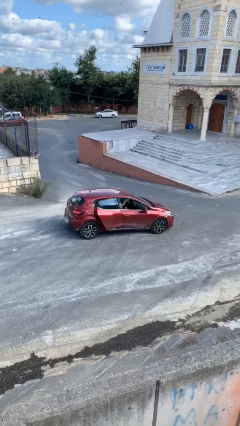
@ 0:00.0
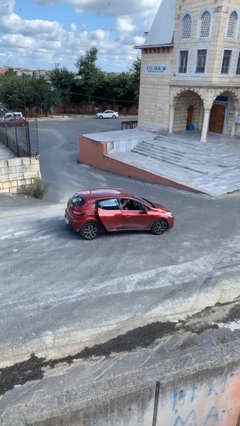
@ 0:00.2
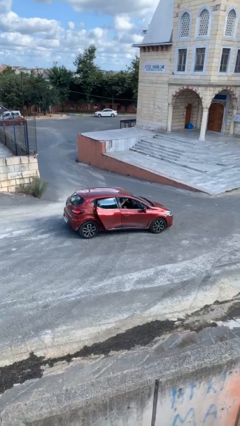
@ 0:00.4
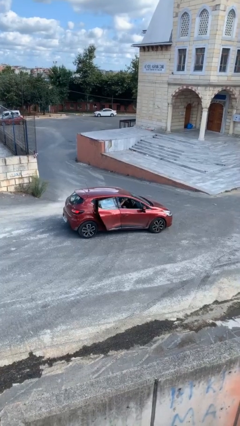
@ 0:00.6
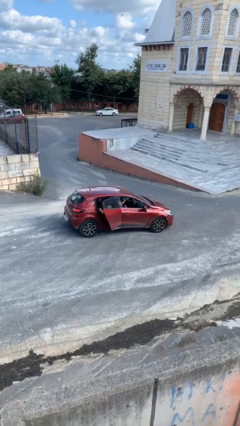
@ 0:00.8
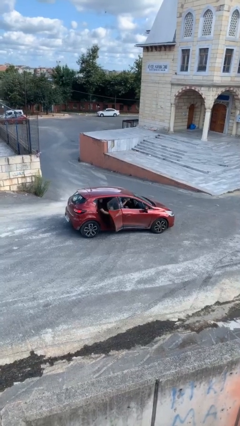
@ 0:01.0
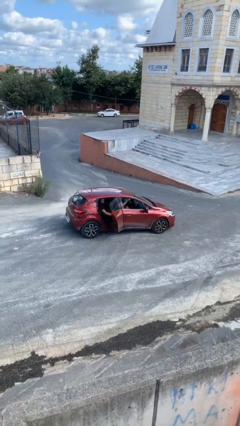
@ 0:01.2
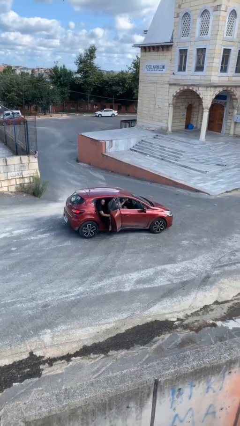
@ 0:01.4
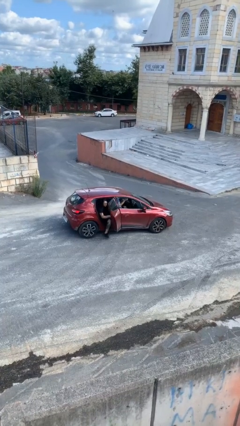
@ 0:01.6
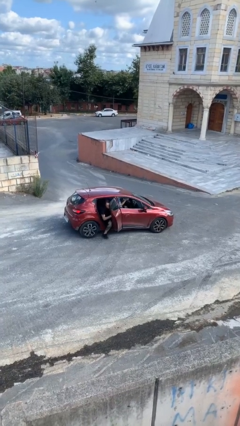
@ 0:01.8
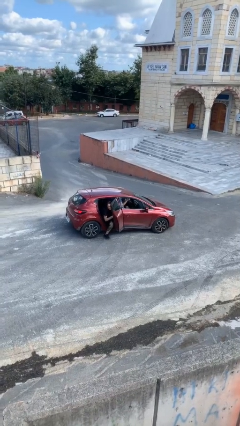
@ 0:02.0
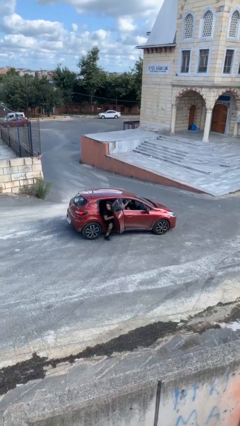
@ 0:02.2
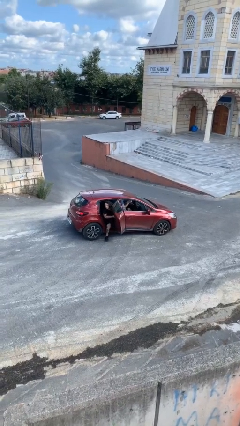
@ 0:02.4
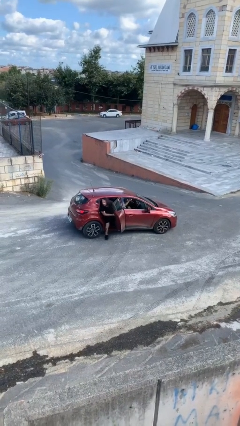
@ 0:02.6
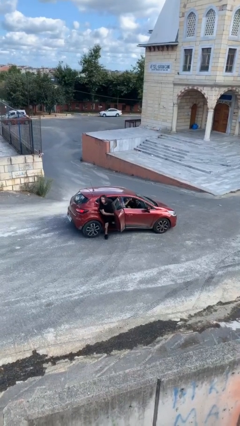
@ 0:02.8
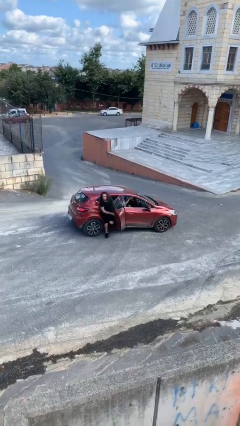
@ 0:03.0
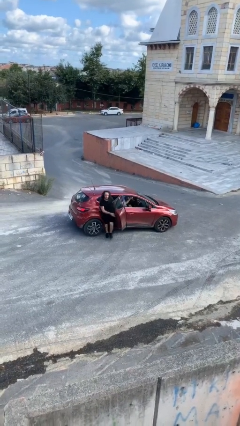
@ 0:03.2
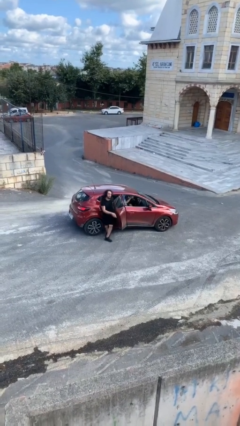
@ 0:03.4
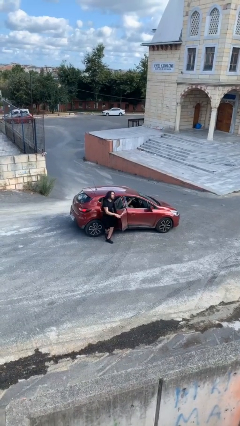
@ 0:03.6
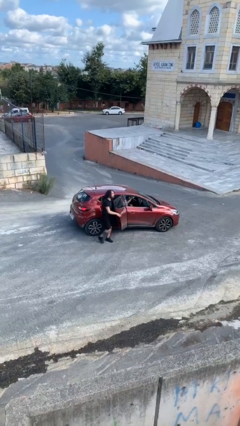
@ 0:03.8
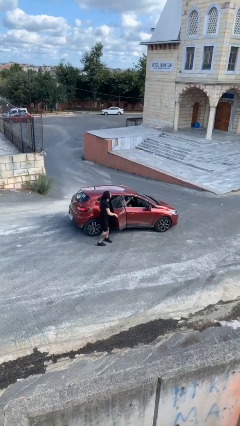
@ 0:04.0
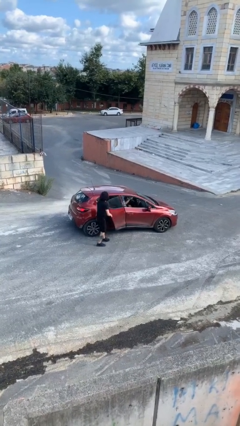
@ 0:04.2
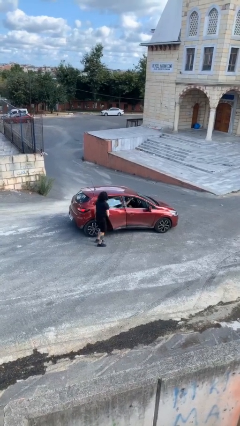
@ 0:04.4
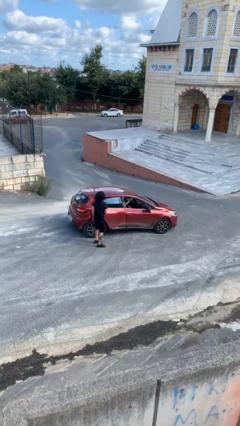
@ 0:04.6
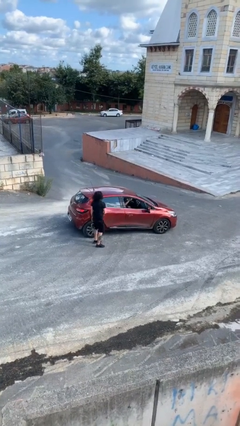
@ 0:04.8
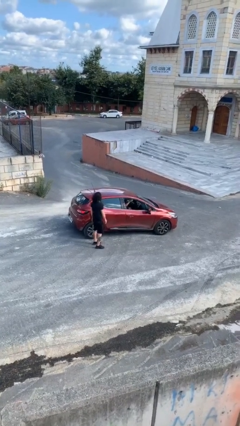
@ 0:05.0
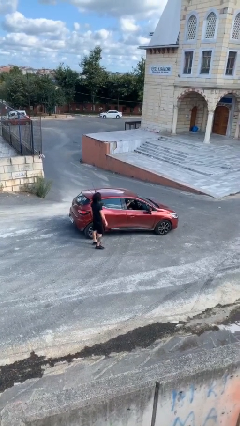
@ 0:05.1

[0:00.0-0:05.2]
car drops off person

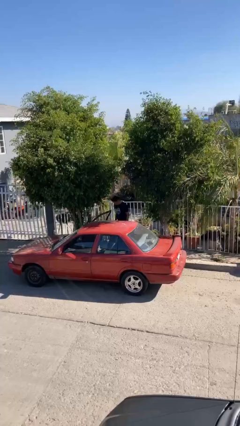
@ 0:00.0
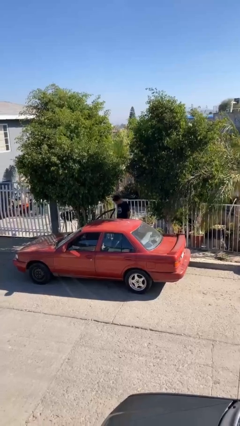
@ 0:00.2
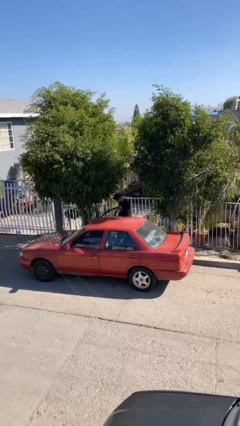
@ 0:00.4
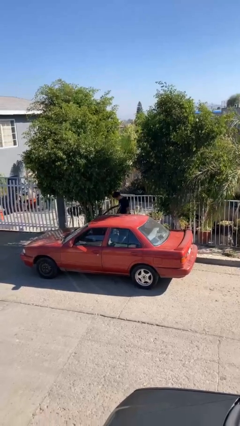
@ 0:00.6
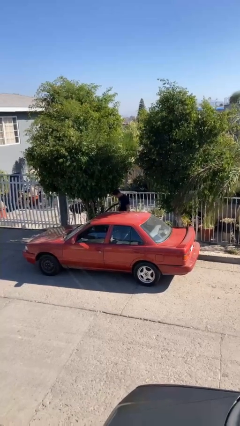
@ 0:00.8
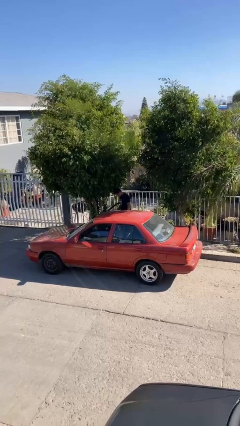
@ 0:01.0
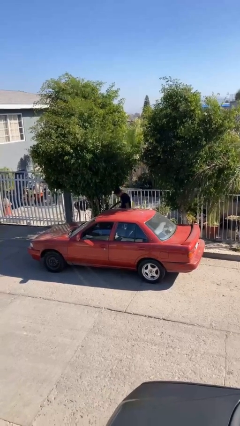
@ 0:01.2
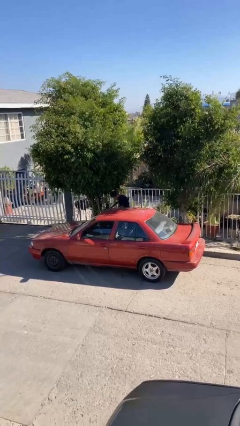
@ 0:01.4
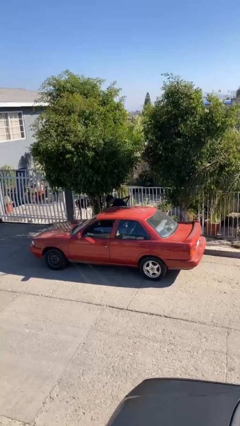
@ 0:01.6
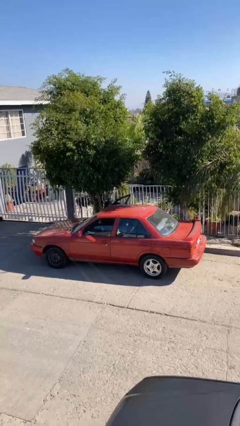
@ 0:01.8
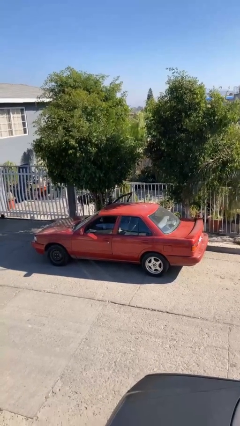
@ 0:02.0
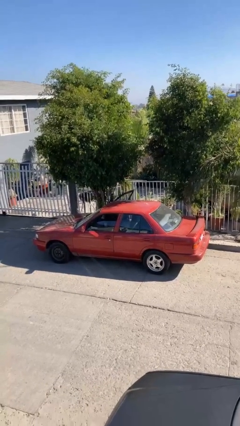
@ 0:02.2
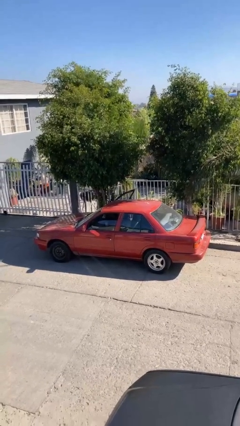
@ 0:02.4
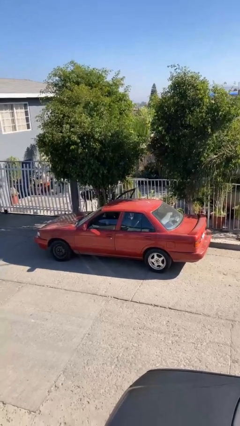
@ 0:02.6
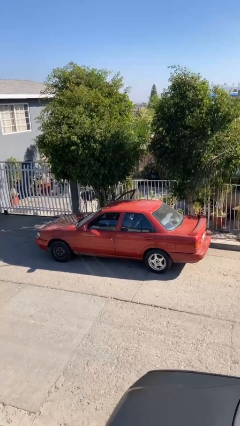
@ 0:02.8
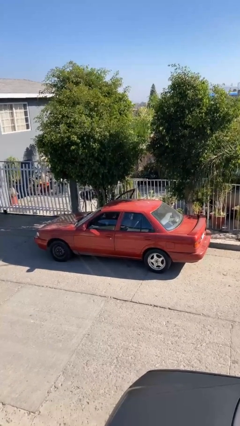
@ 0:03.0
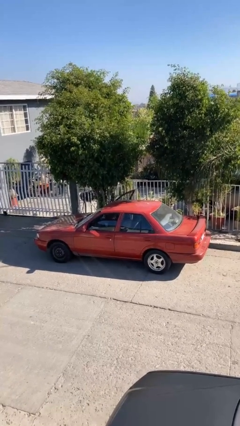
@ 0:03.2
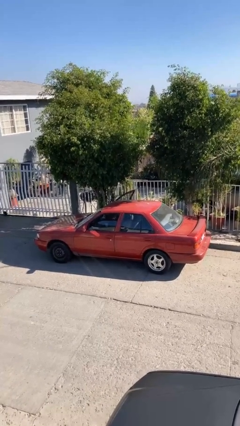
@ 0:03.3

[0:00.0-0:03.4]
person enters car

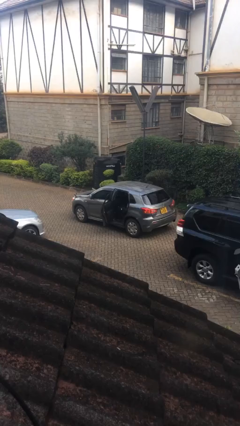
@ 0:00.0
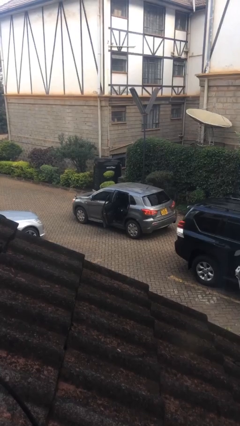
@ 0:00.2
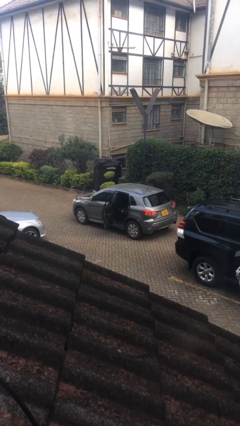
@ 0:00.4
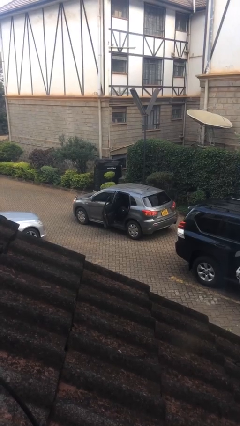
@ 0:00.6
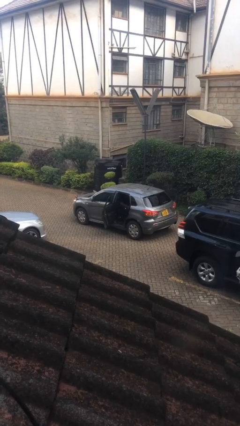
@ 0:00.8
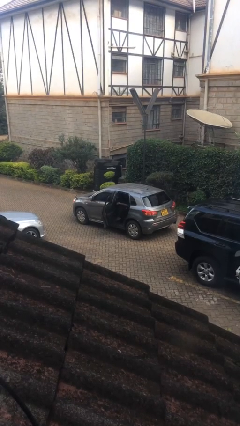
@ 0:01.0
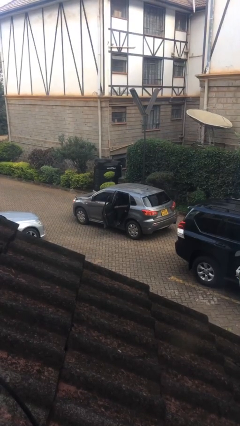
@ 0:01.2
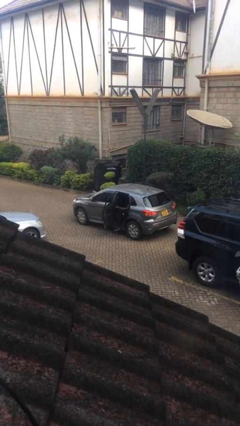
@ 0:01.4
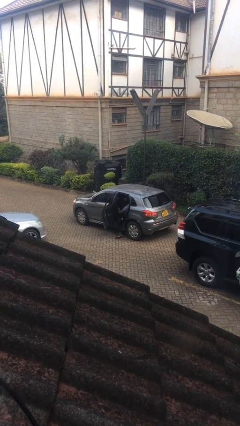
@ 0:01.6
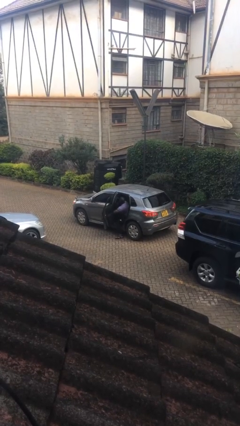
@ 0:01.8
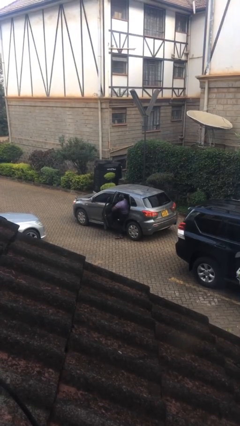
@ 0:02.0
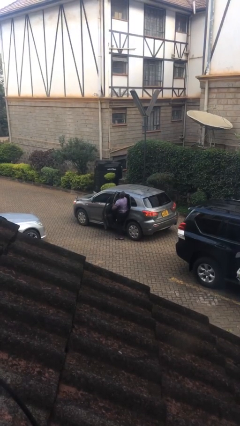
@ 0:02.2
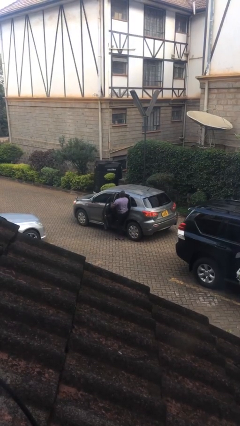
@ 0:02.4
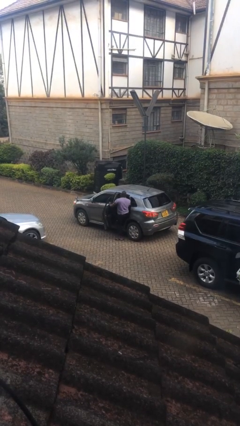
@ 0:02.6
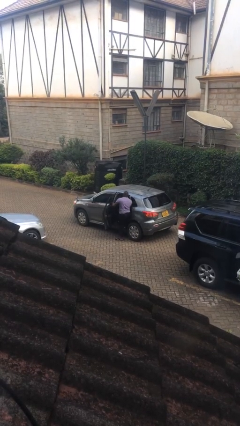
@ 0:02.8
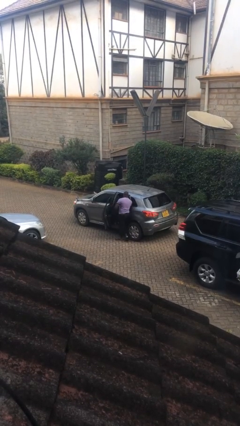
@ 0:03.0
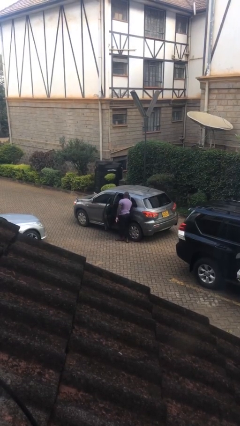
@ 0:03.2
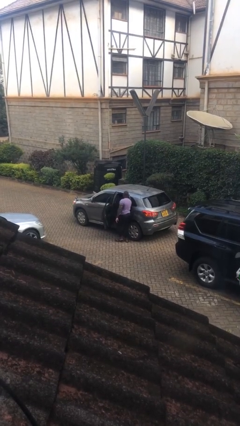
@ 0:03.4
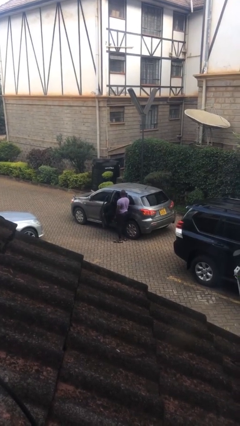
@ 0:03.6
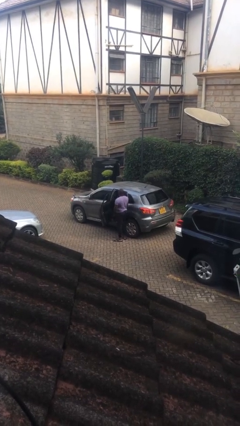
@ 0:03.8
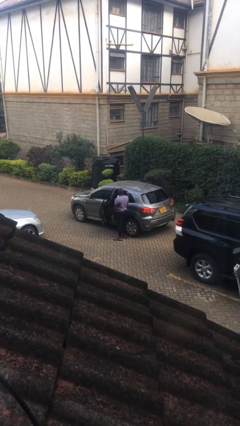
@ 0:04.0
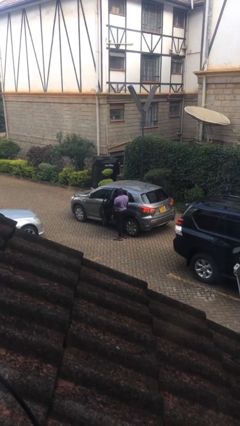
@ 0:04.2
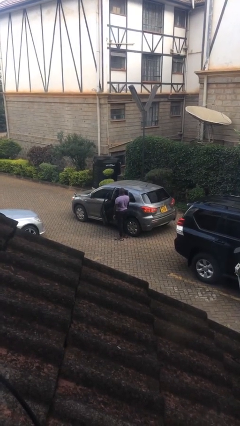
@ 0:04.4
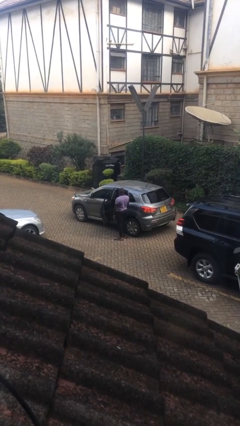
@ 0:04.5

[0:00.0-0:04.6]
person exits car

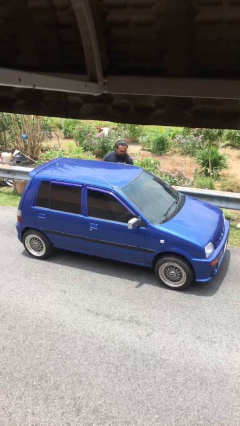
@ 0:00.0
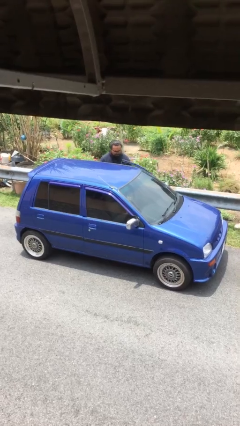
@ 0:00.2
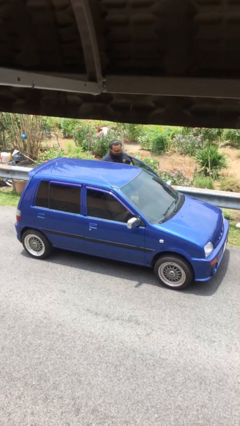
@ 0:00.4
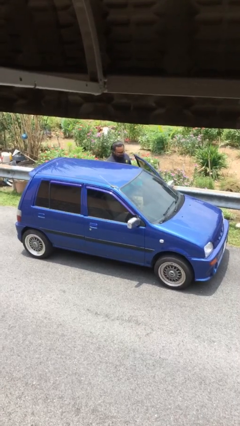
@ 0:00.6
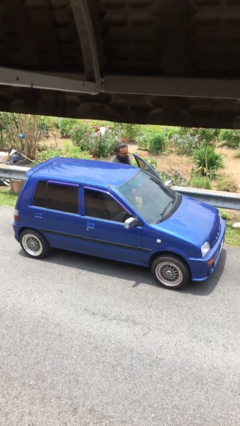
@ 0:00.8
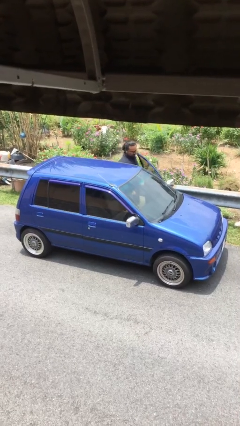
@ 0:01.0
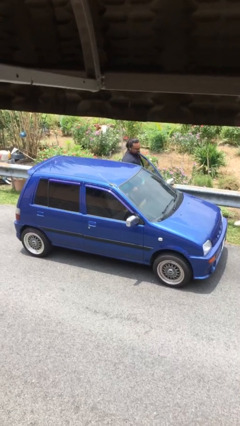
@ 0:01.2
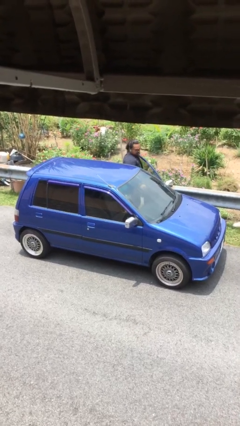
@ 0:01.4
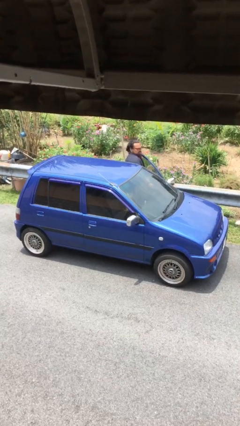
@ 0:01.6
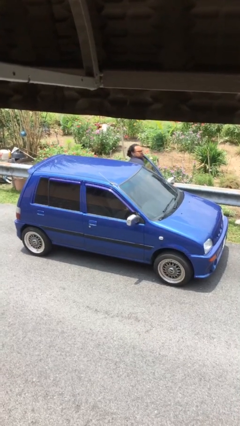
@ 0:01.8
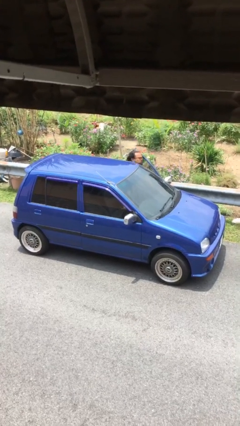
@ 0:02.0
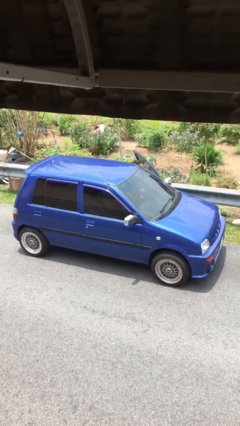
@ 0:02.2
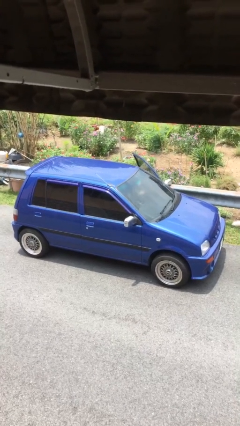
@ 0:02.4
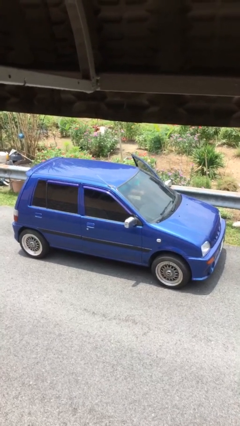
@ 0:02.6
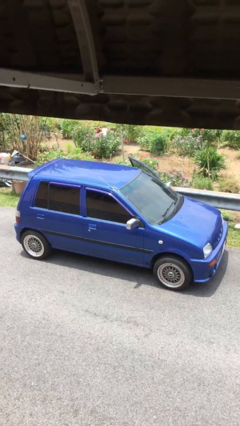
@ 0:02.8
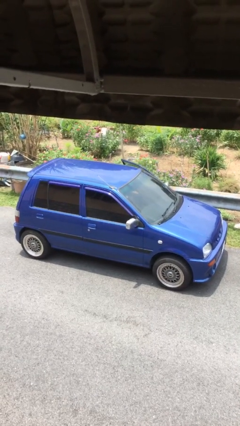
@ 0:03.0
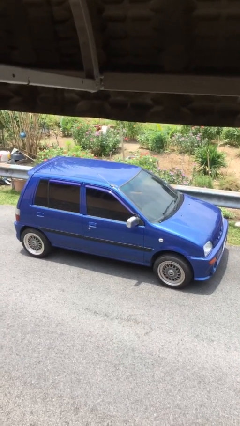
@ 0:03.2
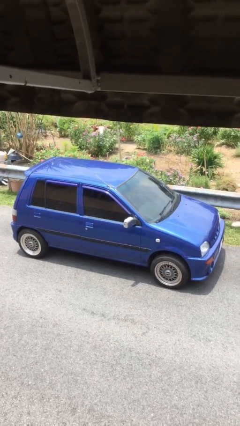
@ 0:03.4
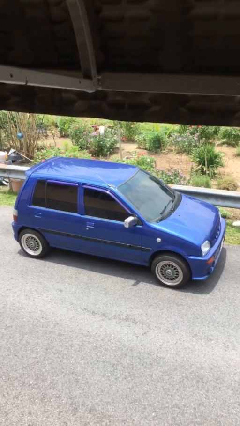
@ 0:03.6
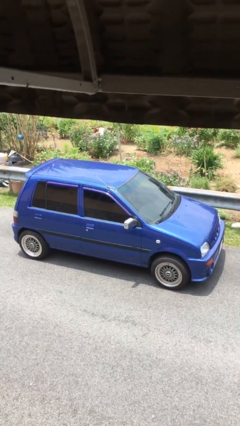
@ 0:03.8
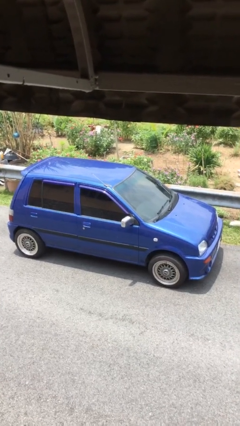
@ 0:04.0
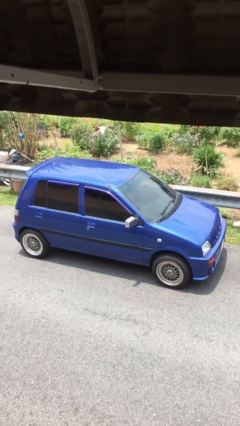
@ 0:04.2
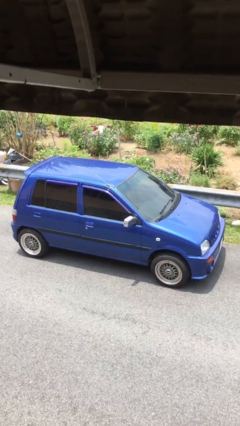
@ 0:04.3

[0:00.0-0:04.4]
car picks up person
